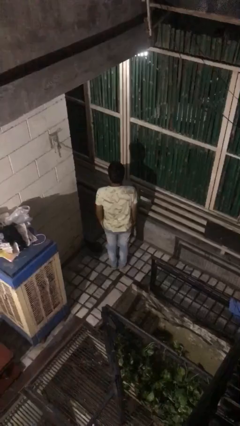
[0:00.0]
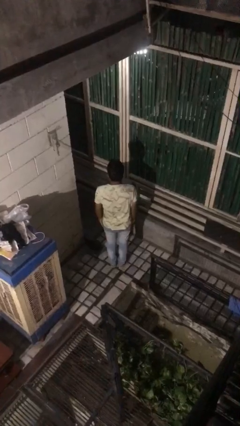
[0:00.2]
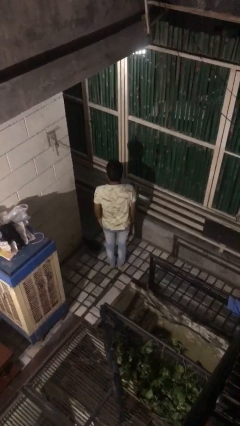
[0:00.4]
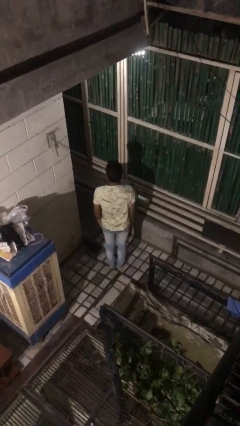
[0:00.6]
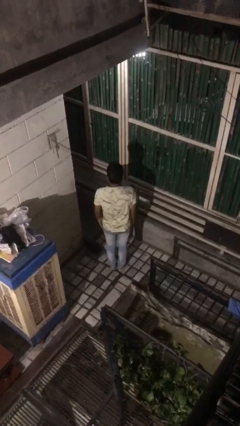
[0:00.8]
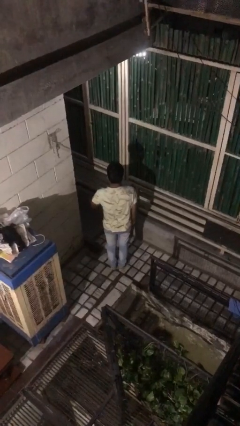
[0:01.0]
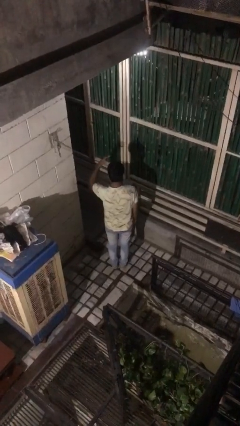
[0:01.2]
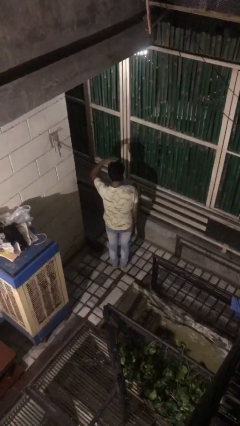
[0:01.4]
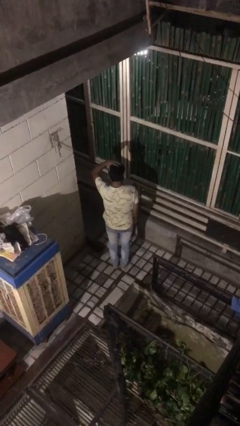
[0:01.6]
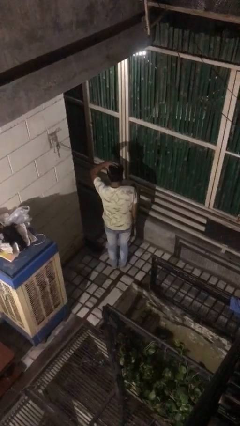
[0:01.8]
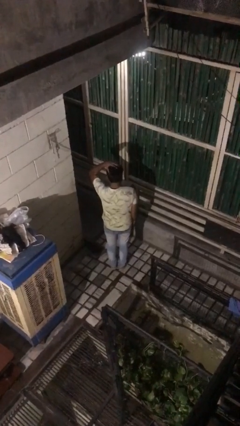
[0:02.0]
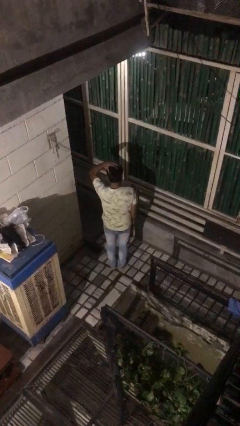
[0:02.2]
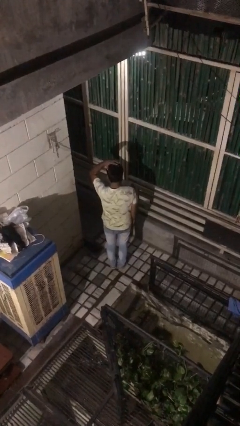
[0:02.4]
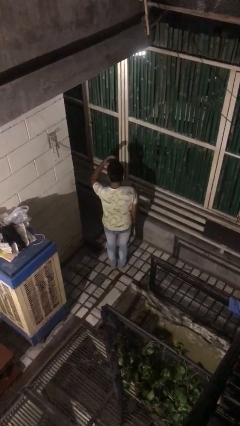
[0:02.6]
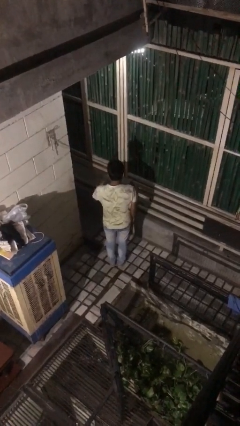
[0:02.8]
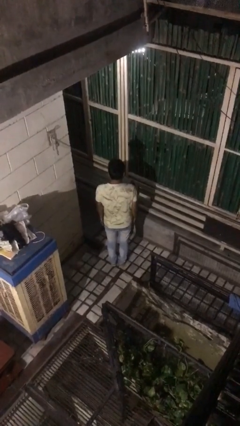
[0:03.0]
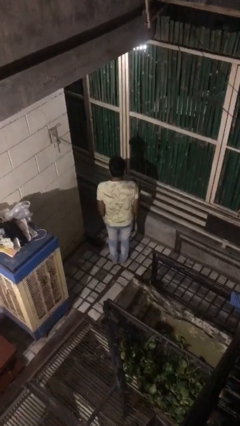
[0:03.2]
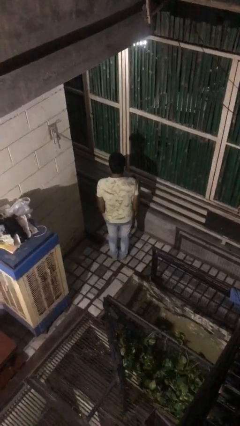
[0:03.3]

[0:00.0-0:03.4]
person pats head

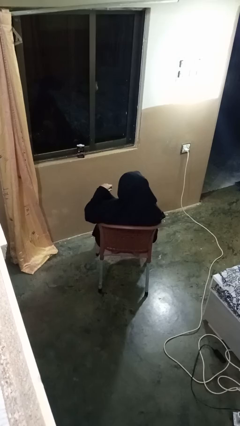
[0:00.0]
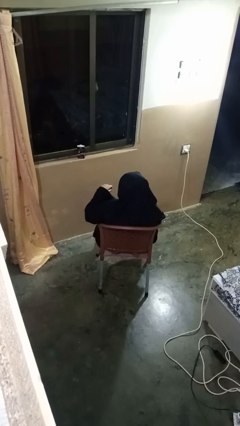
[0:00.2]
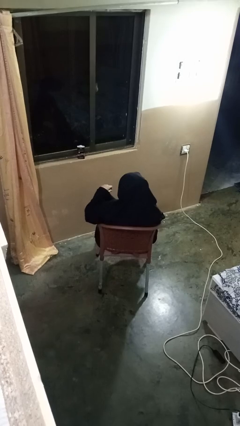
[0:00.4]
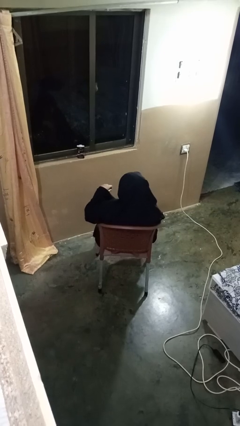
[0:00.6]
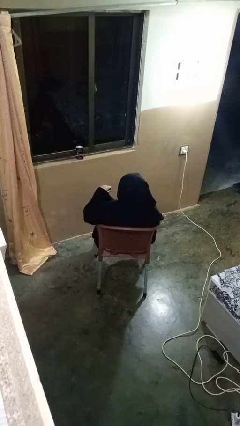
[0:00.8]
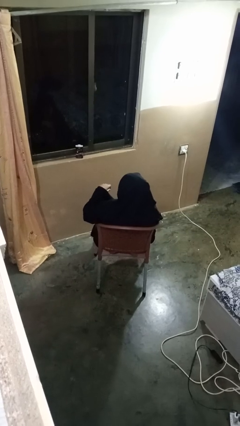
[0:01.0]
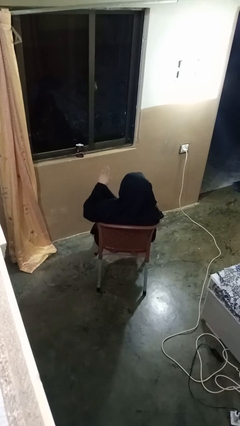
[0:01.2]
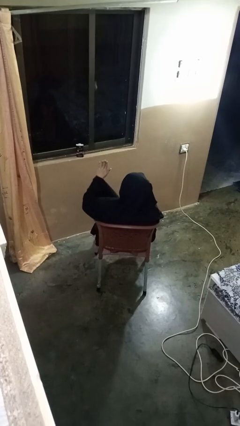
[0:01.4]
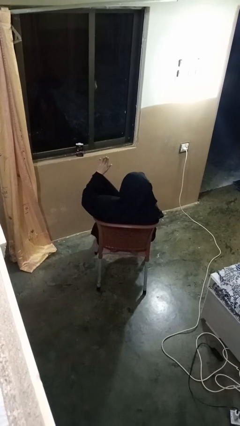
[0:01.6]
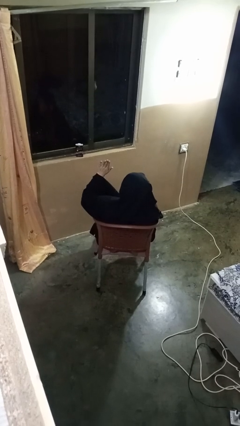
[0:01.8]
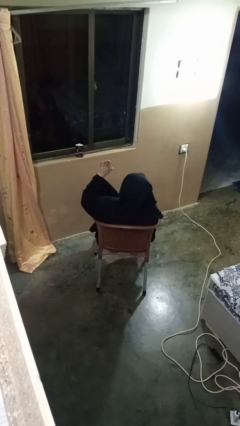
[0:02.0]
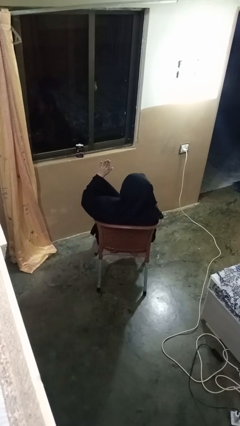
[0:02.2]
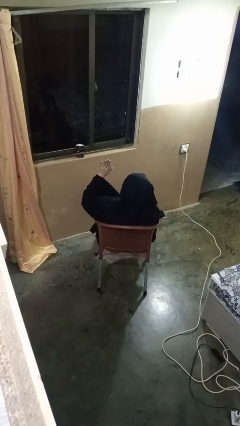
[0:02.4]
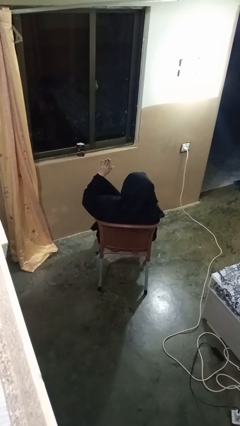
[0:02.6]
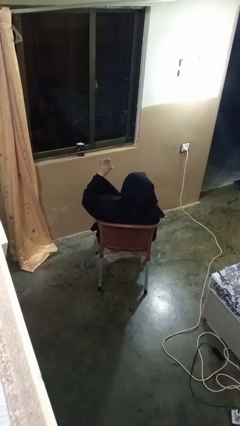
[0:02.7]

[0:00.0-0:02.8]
person gestures raise hand

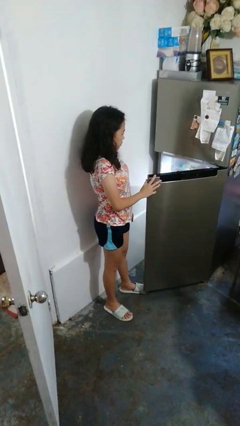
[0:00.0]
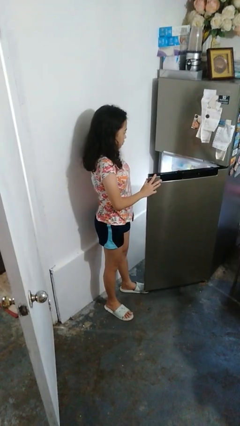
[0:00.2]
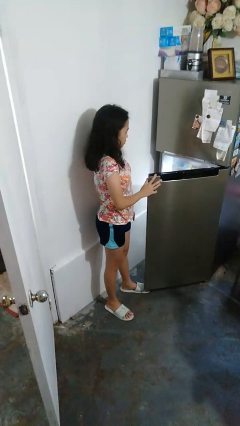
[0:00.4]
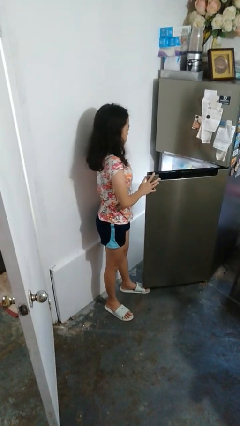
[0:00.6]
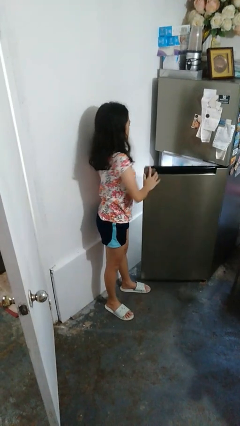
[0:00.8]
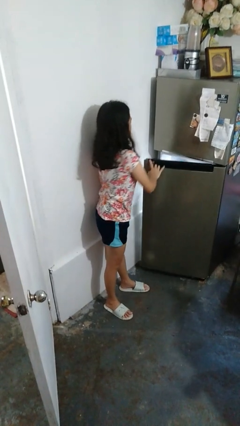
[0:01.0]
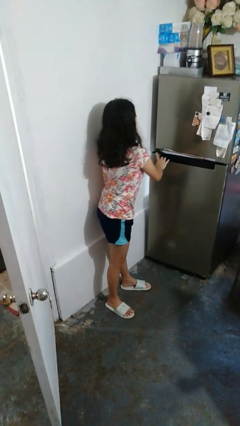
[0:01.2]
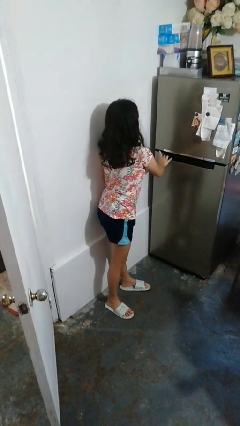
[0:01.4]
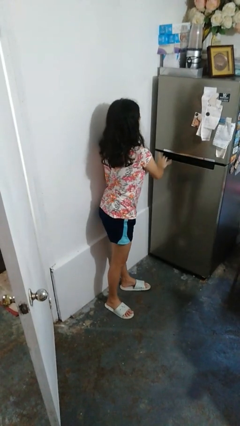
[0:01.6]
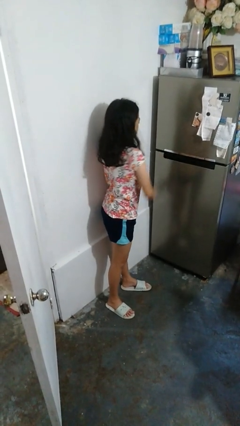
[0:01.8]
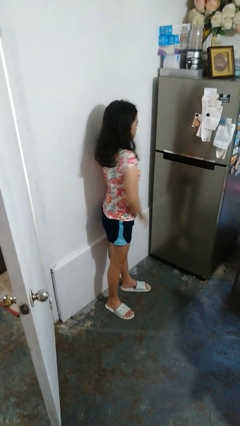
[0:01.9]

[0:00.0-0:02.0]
person closes refrigerator

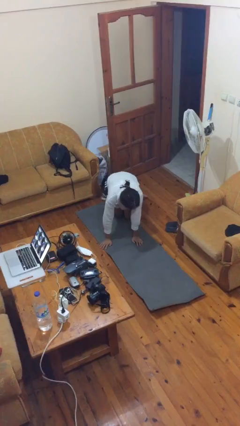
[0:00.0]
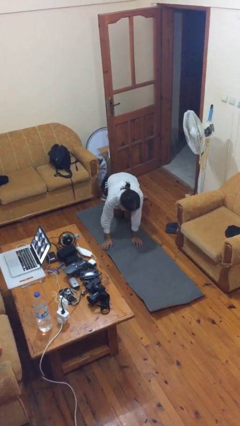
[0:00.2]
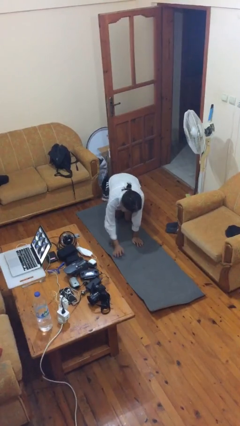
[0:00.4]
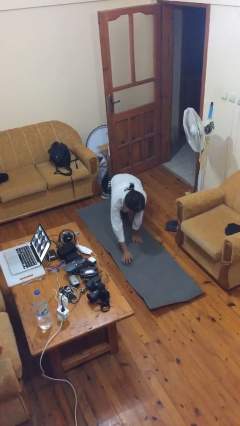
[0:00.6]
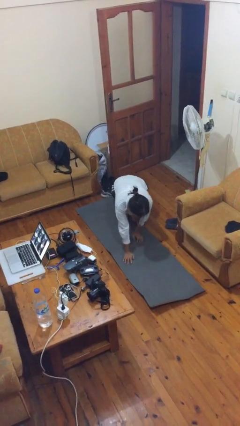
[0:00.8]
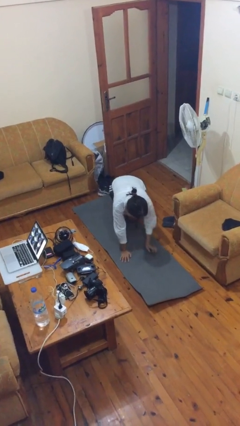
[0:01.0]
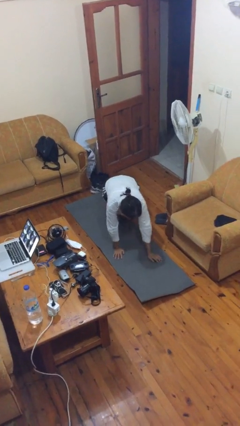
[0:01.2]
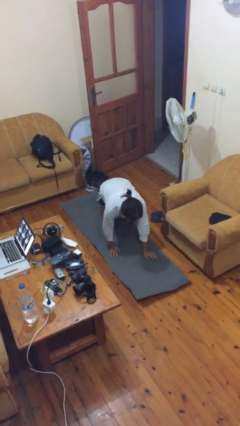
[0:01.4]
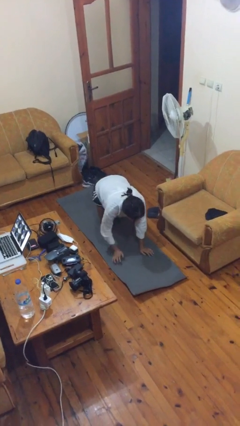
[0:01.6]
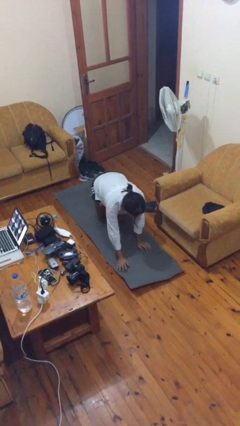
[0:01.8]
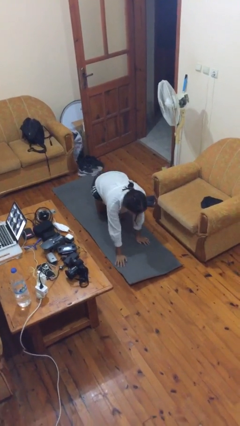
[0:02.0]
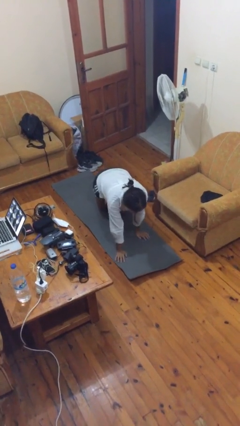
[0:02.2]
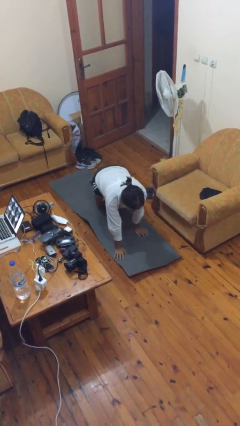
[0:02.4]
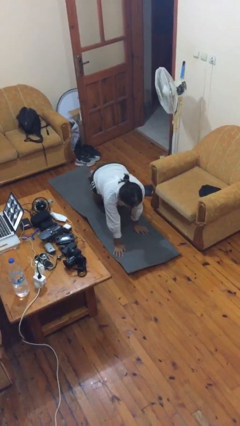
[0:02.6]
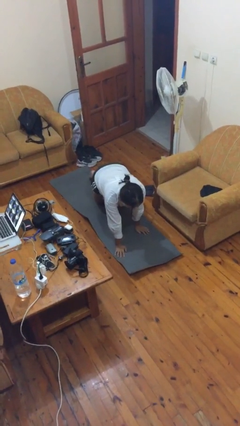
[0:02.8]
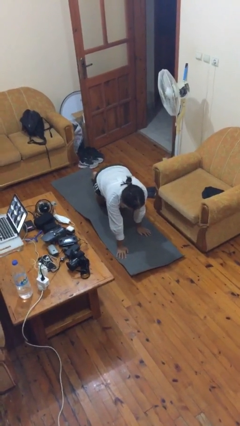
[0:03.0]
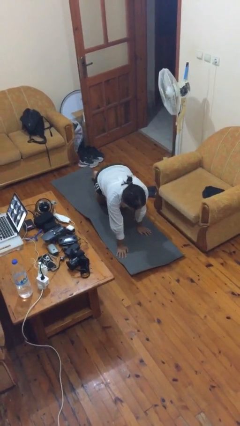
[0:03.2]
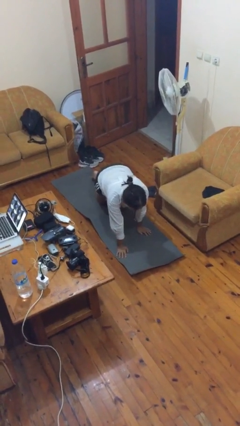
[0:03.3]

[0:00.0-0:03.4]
person crawls

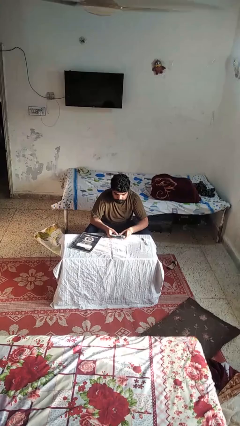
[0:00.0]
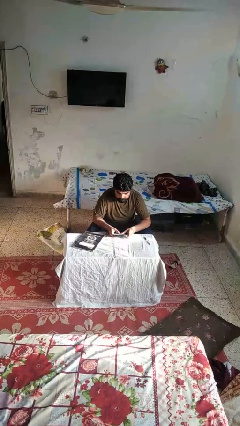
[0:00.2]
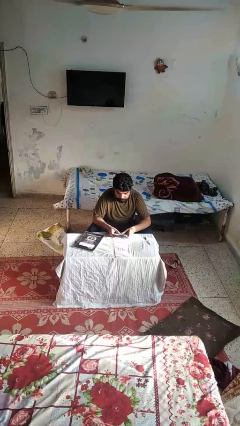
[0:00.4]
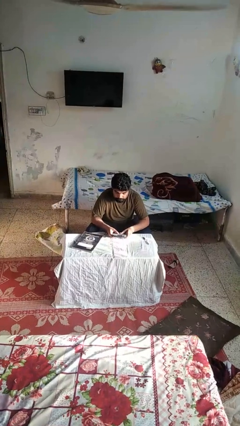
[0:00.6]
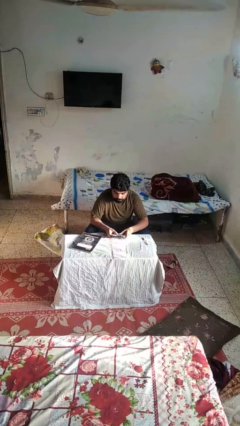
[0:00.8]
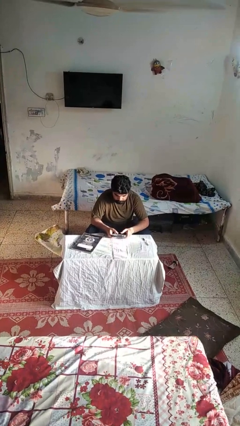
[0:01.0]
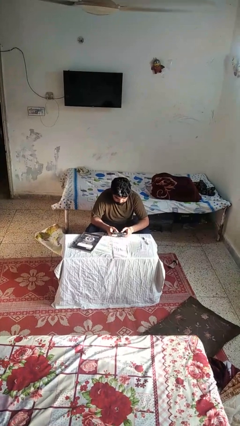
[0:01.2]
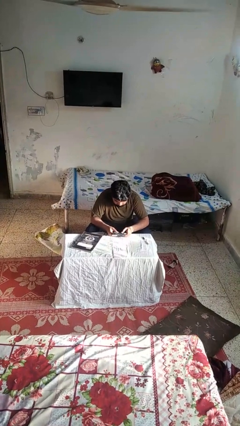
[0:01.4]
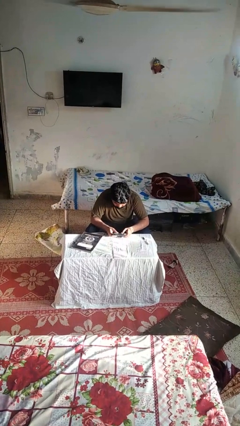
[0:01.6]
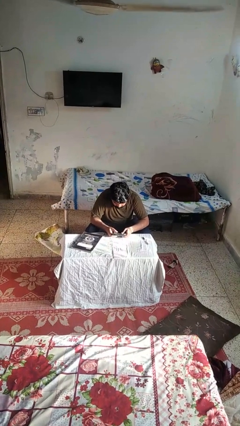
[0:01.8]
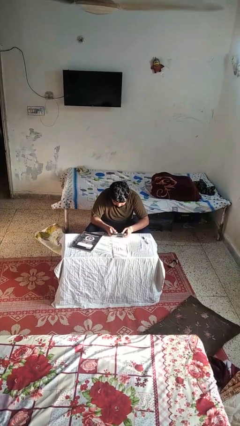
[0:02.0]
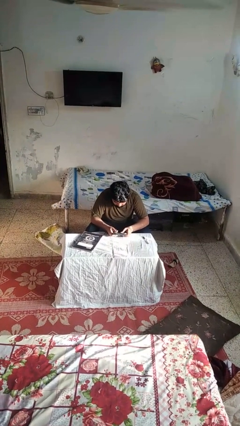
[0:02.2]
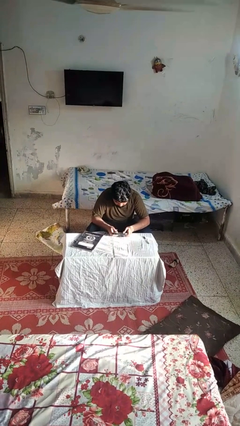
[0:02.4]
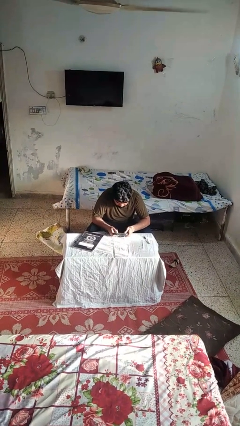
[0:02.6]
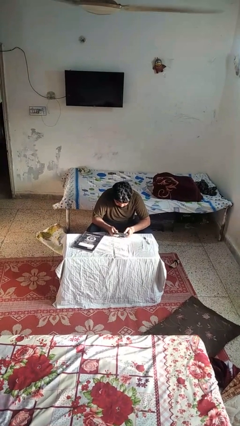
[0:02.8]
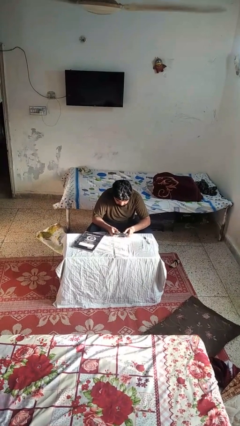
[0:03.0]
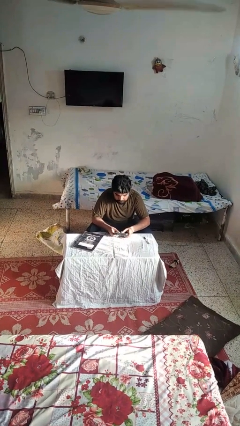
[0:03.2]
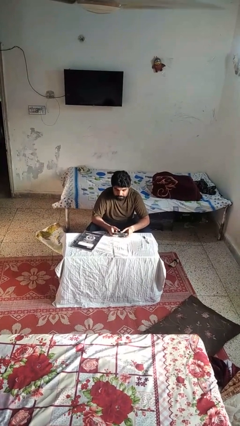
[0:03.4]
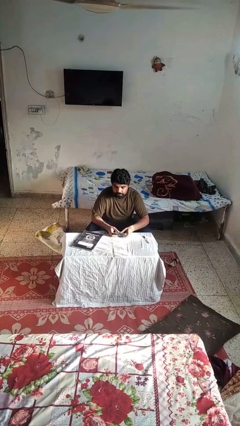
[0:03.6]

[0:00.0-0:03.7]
person interacts with handheld game

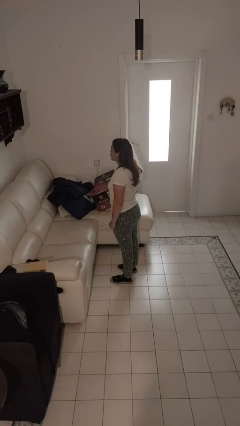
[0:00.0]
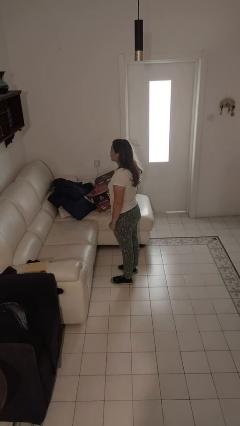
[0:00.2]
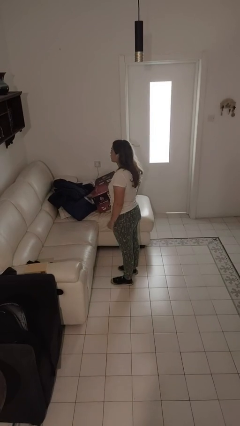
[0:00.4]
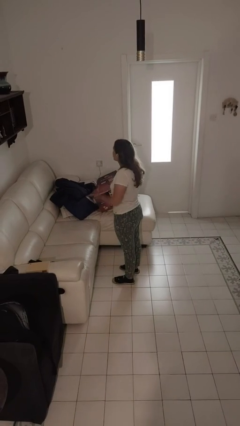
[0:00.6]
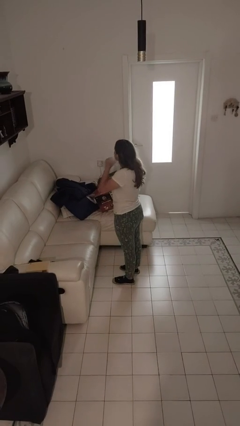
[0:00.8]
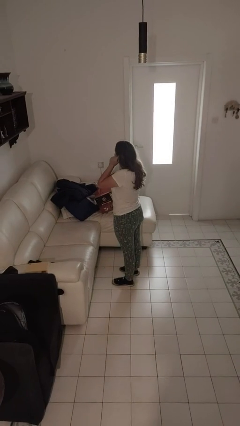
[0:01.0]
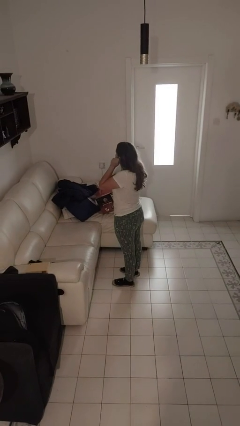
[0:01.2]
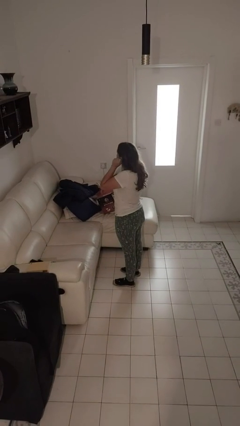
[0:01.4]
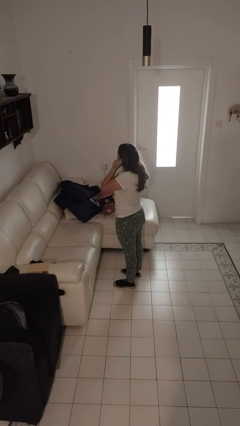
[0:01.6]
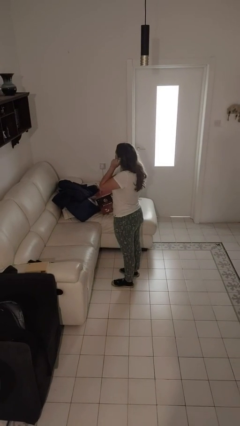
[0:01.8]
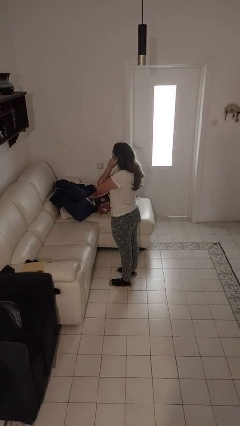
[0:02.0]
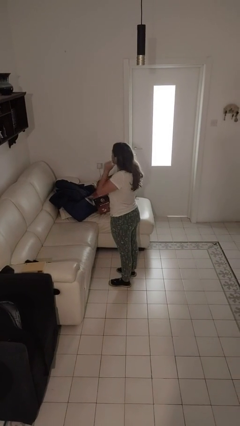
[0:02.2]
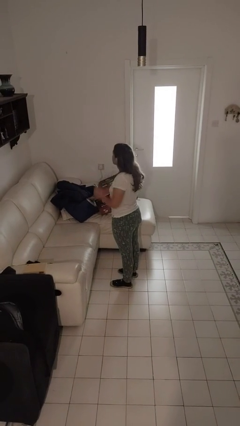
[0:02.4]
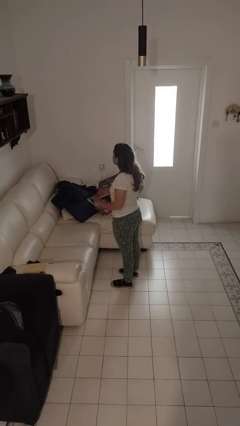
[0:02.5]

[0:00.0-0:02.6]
person touches earlobe
